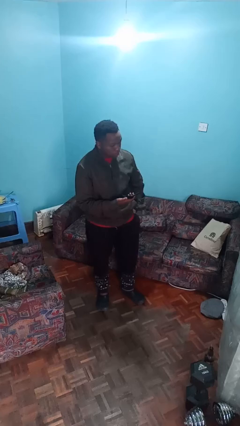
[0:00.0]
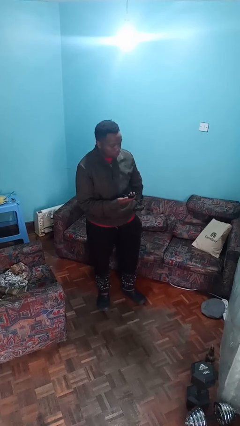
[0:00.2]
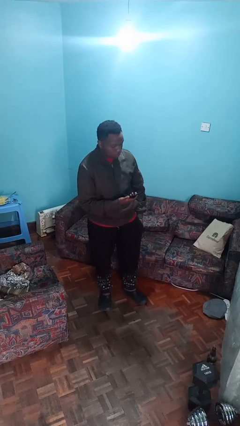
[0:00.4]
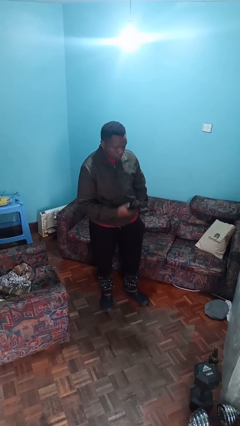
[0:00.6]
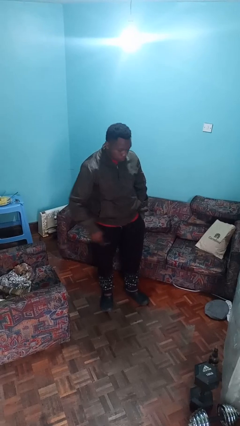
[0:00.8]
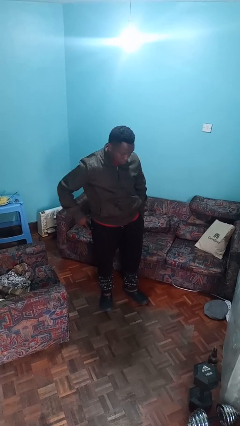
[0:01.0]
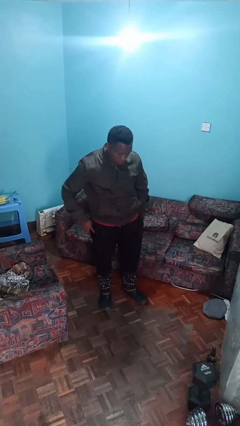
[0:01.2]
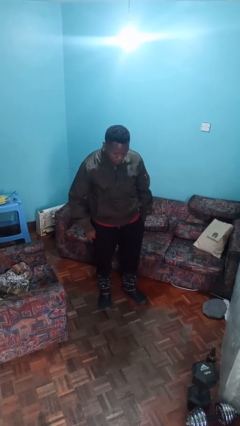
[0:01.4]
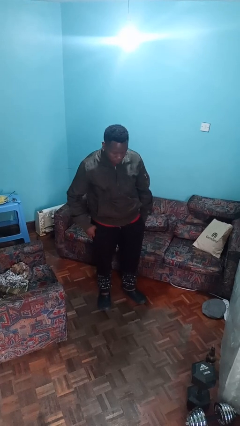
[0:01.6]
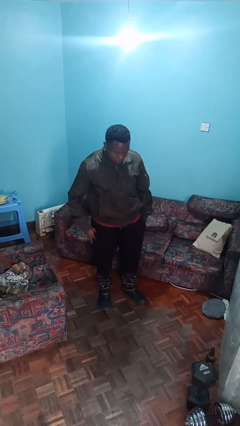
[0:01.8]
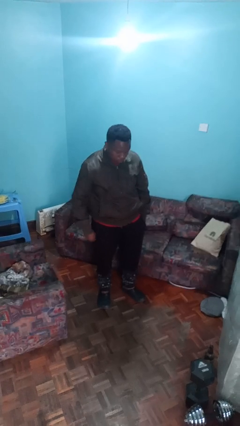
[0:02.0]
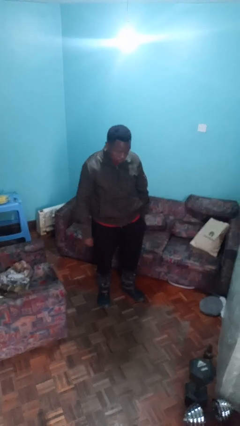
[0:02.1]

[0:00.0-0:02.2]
person puts phone into pocket

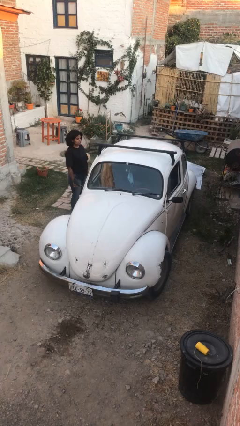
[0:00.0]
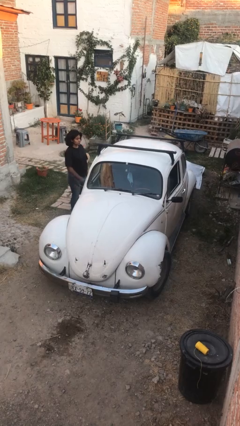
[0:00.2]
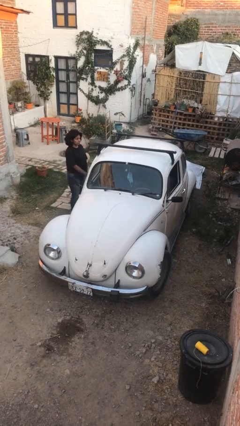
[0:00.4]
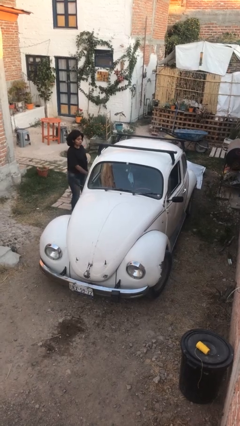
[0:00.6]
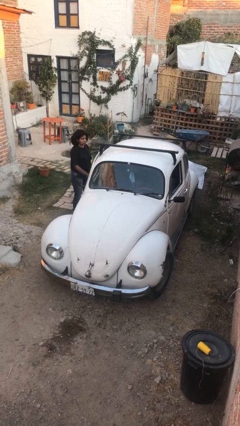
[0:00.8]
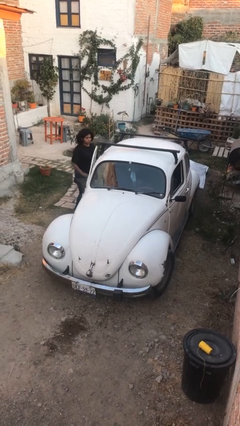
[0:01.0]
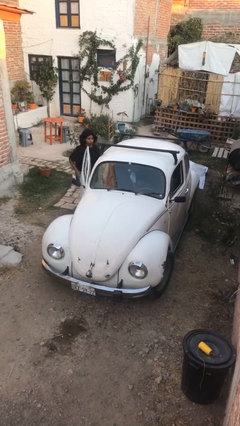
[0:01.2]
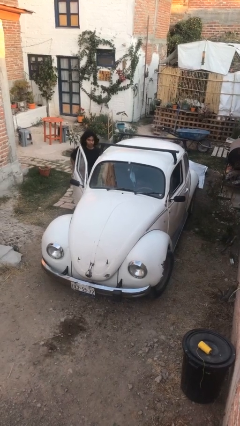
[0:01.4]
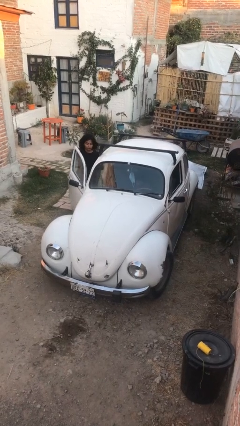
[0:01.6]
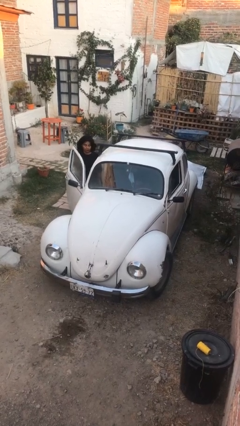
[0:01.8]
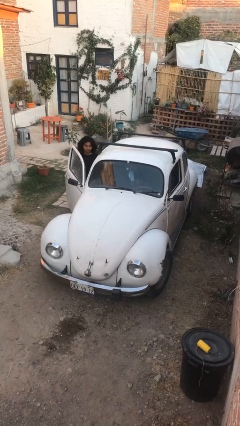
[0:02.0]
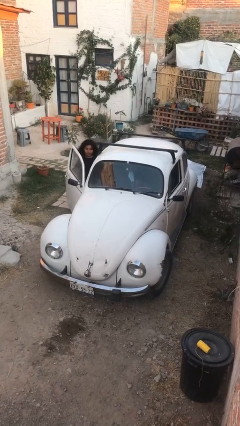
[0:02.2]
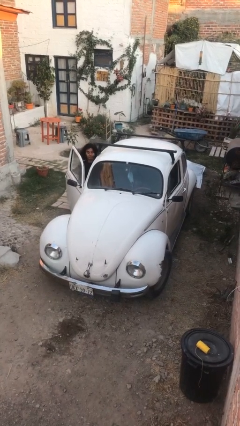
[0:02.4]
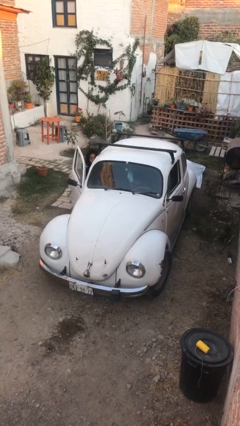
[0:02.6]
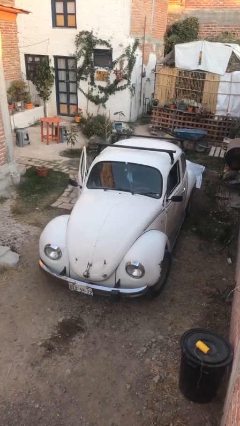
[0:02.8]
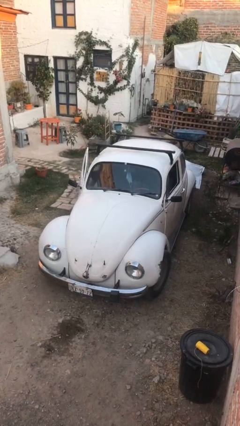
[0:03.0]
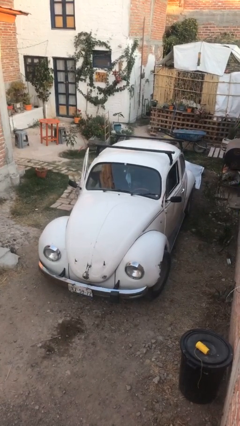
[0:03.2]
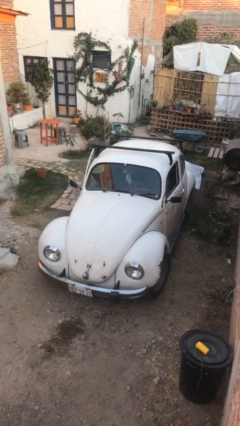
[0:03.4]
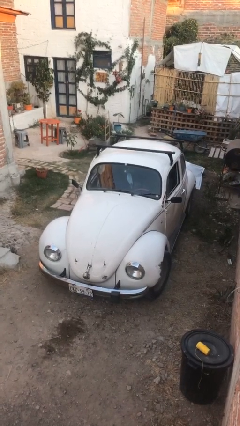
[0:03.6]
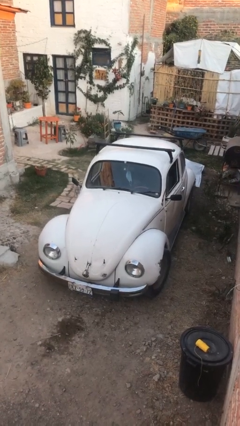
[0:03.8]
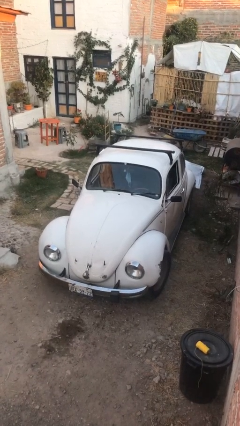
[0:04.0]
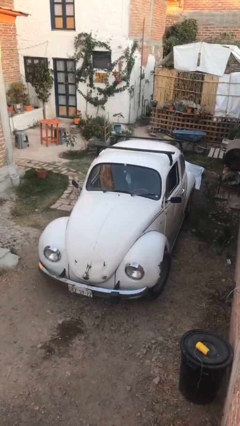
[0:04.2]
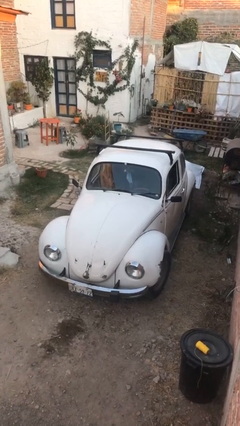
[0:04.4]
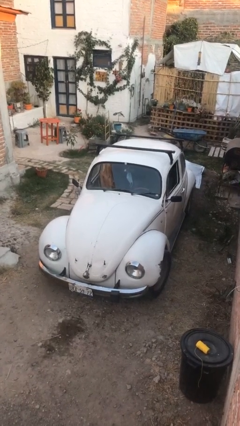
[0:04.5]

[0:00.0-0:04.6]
car picks up person

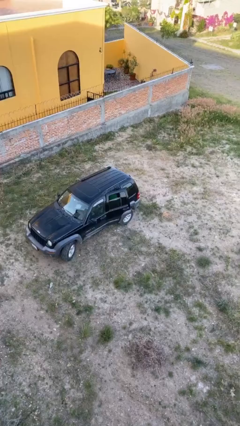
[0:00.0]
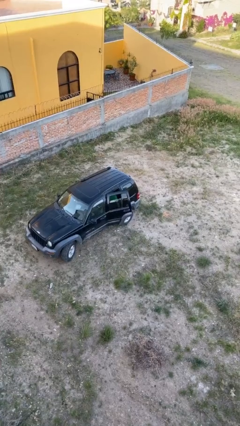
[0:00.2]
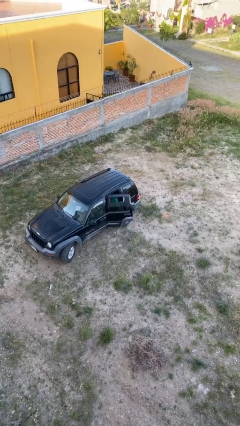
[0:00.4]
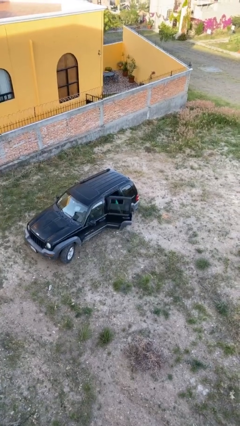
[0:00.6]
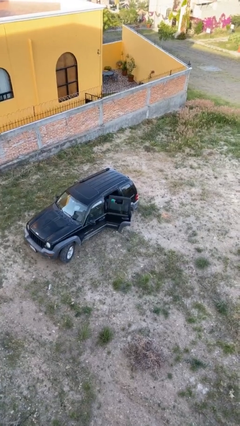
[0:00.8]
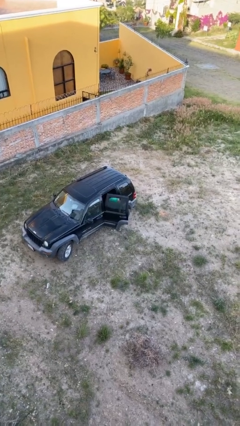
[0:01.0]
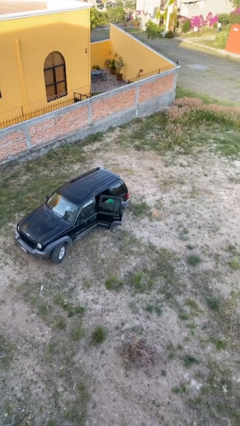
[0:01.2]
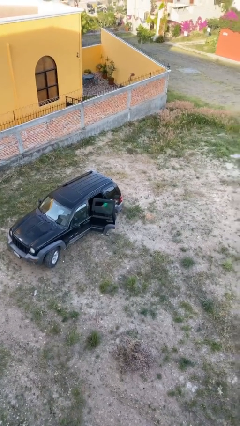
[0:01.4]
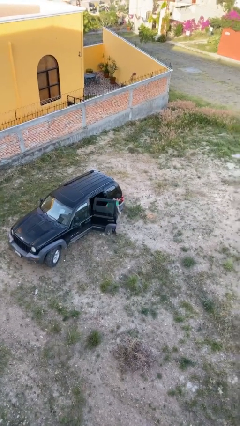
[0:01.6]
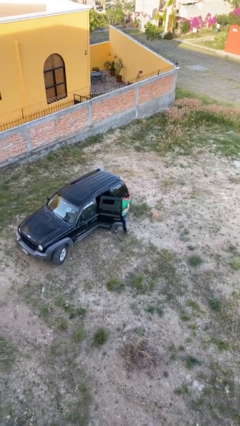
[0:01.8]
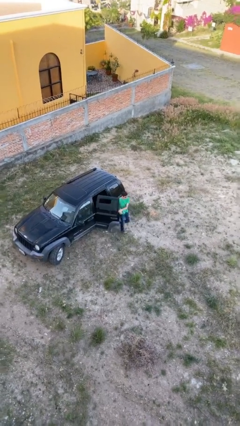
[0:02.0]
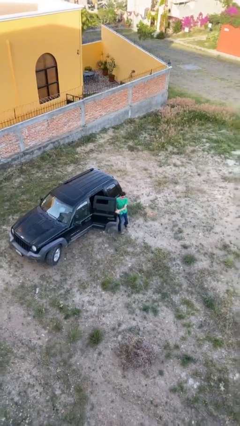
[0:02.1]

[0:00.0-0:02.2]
person opens car door

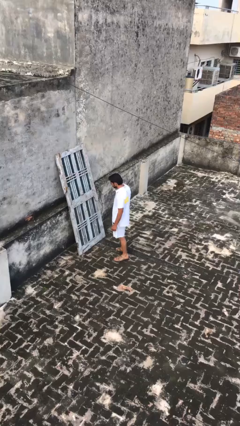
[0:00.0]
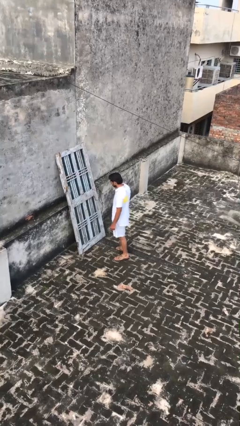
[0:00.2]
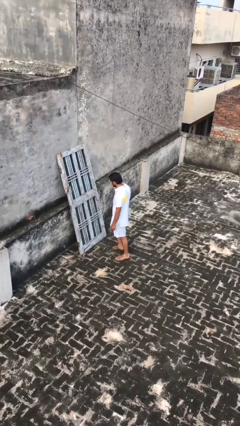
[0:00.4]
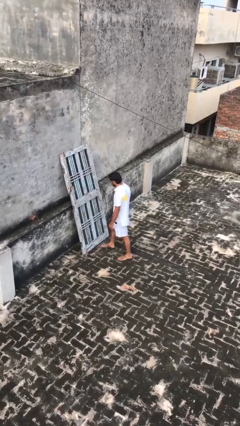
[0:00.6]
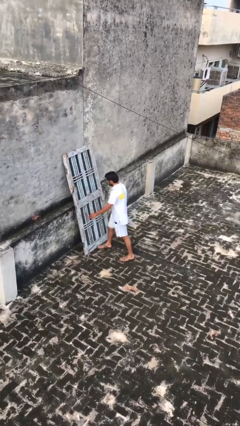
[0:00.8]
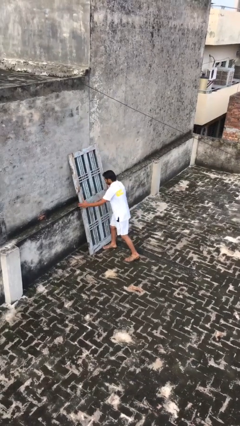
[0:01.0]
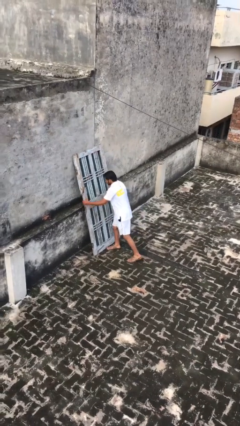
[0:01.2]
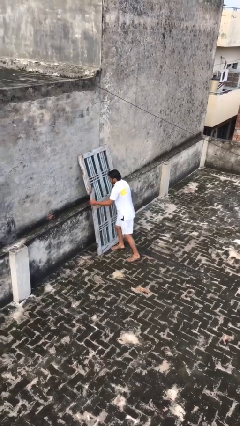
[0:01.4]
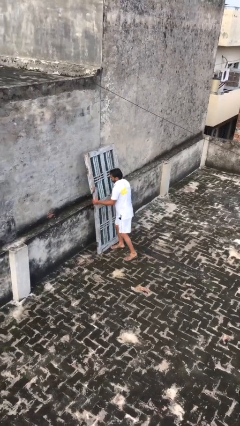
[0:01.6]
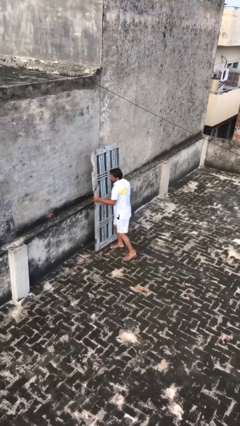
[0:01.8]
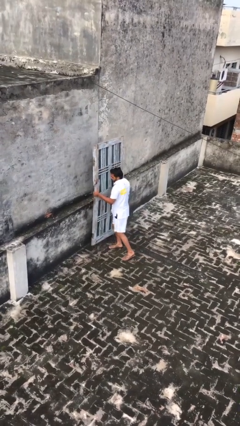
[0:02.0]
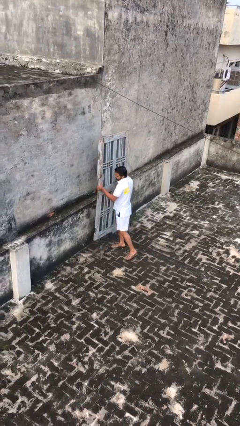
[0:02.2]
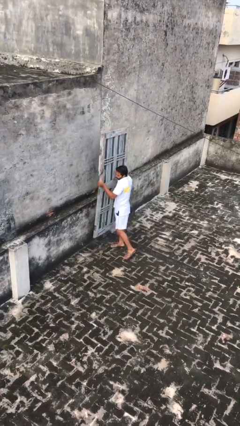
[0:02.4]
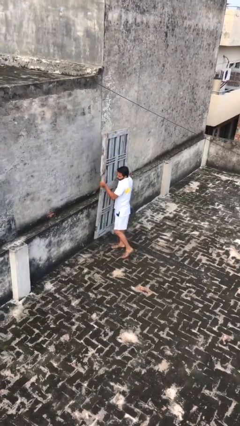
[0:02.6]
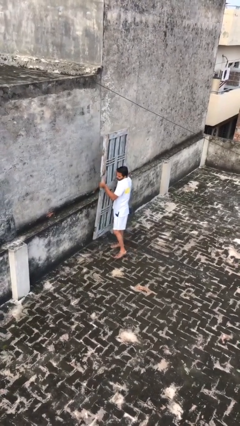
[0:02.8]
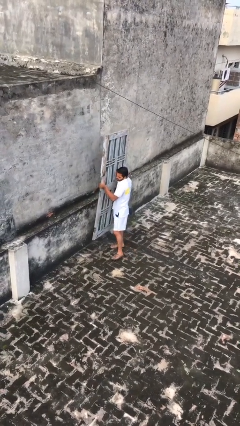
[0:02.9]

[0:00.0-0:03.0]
person picks up object from floor

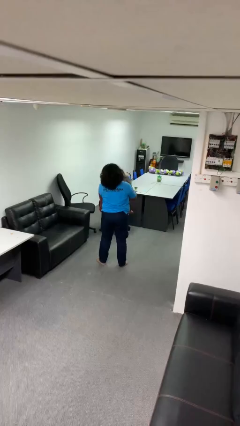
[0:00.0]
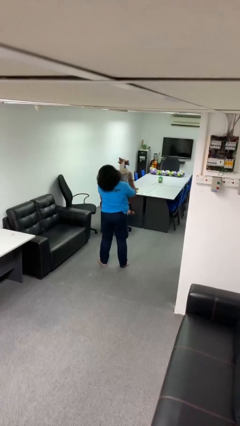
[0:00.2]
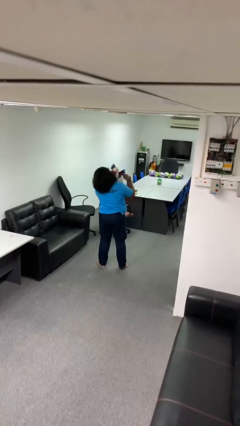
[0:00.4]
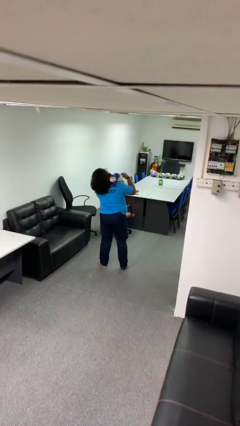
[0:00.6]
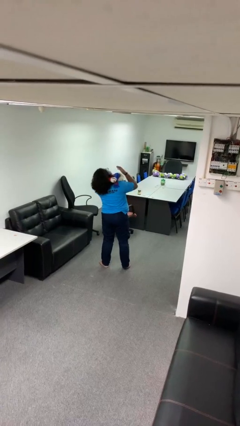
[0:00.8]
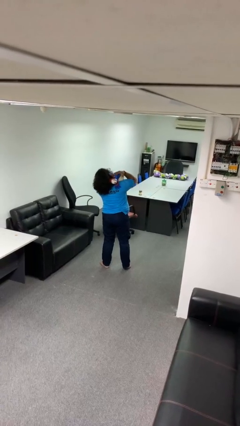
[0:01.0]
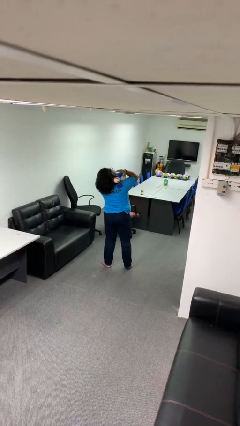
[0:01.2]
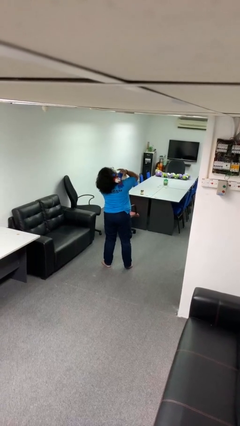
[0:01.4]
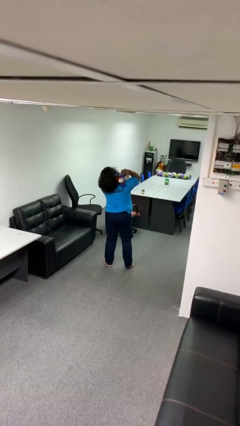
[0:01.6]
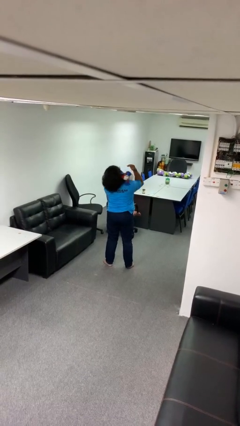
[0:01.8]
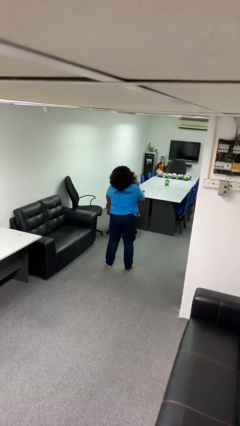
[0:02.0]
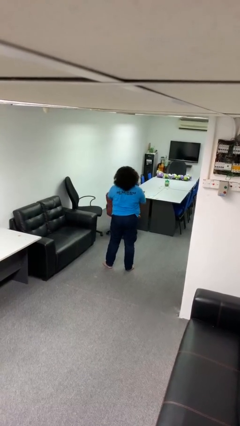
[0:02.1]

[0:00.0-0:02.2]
person hugs stuffed animal

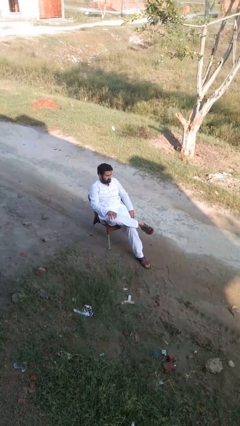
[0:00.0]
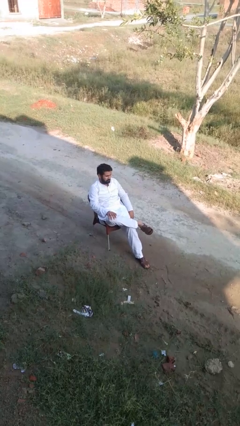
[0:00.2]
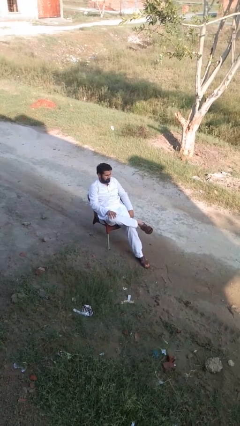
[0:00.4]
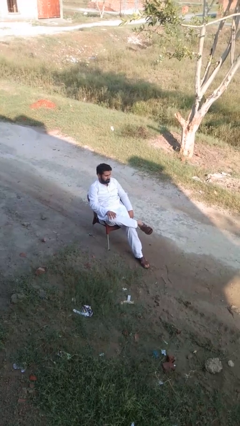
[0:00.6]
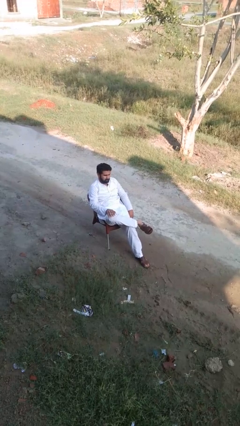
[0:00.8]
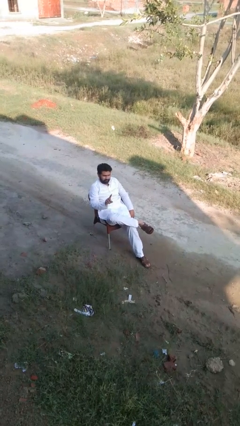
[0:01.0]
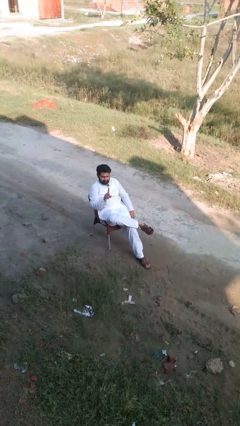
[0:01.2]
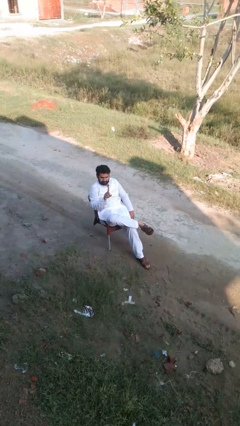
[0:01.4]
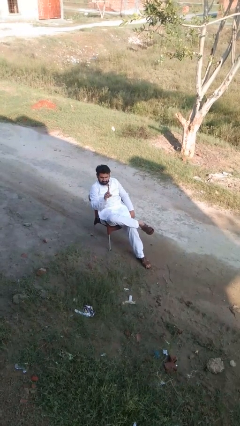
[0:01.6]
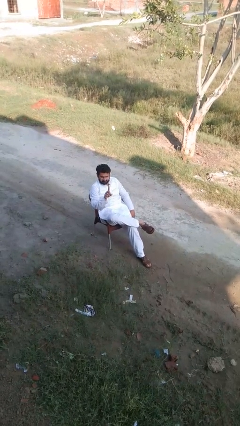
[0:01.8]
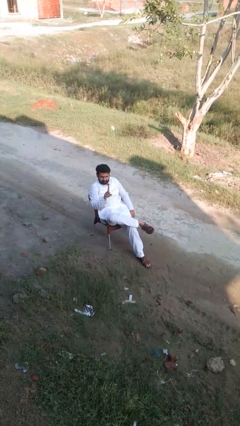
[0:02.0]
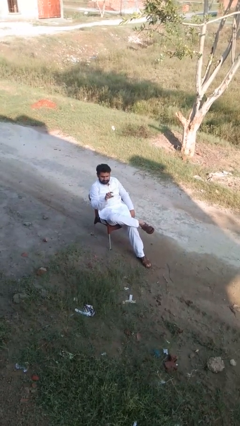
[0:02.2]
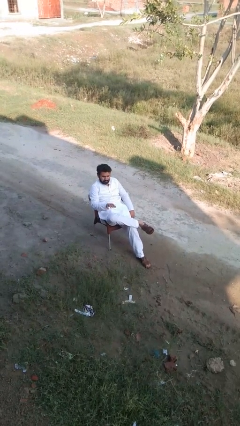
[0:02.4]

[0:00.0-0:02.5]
person gestures number one

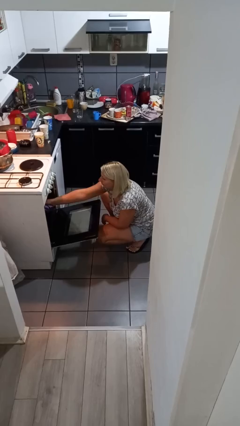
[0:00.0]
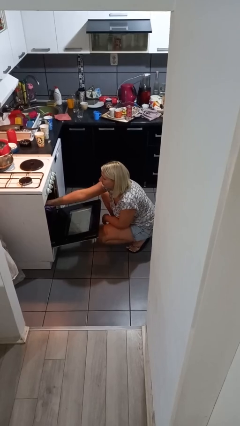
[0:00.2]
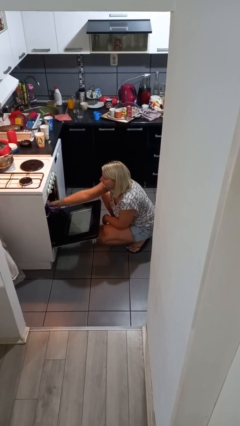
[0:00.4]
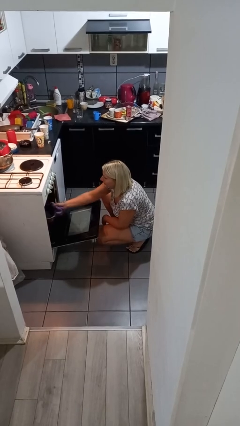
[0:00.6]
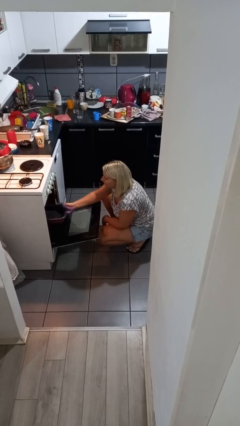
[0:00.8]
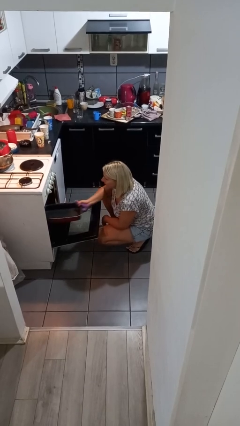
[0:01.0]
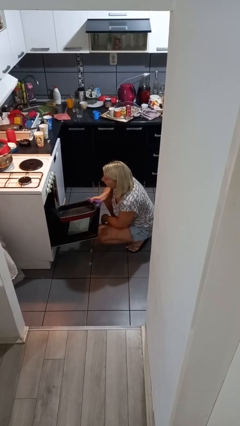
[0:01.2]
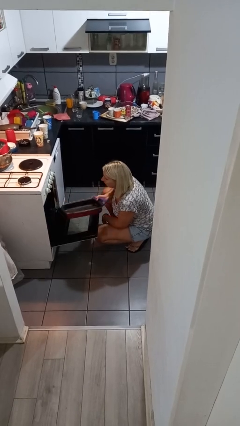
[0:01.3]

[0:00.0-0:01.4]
person takes object from oven
